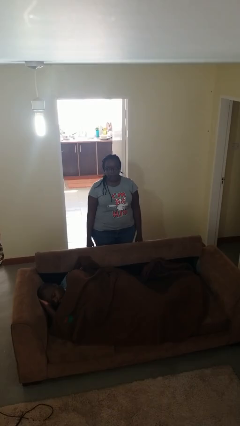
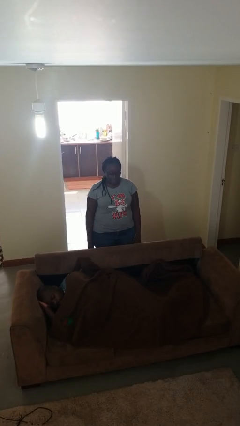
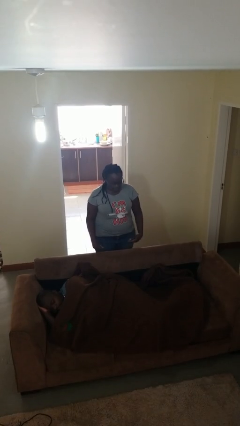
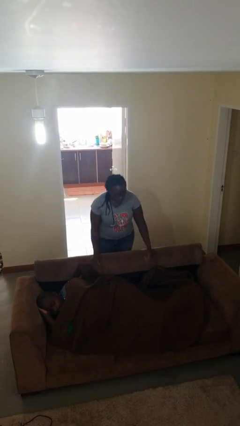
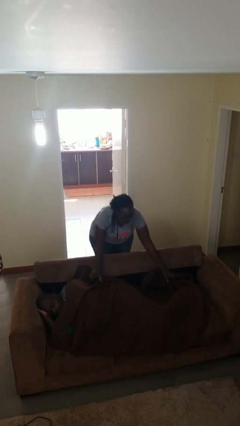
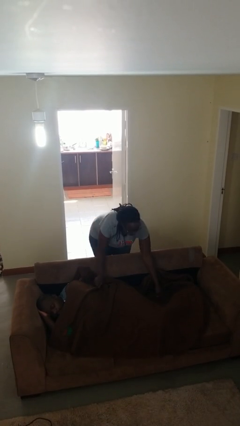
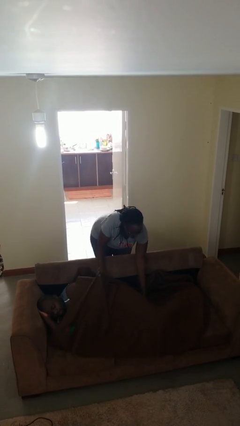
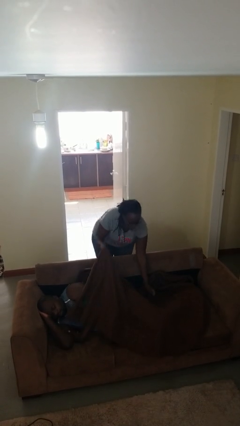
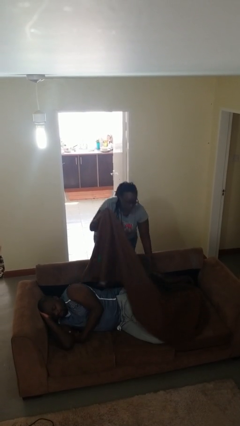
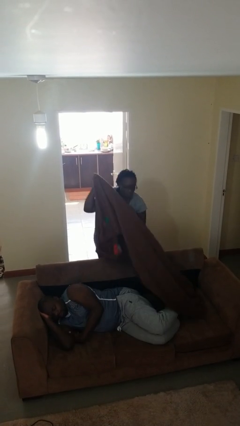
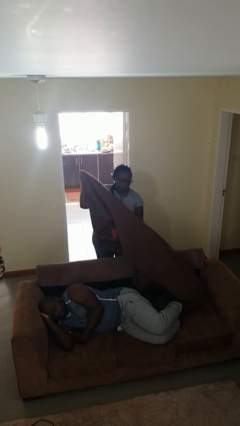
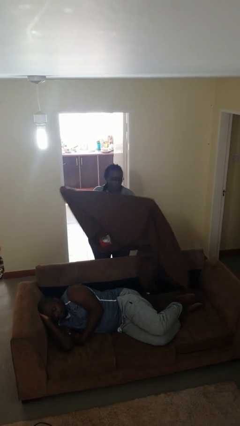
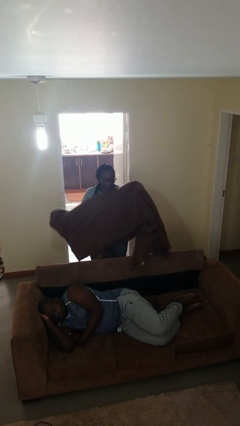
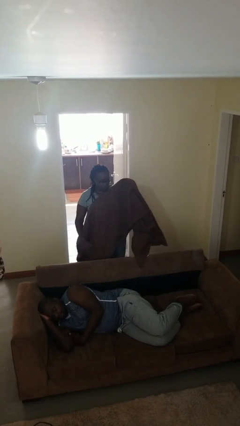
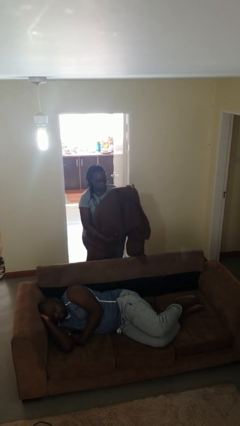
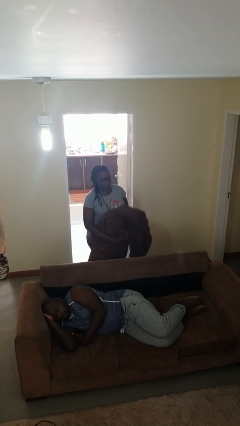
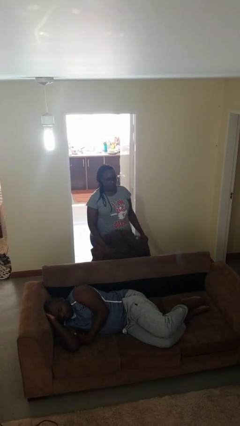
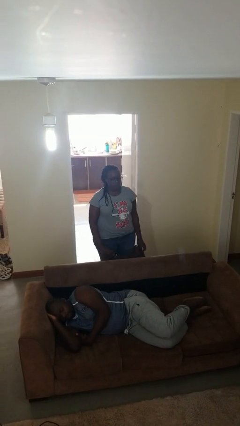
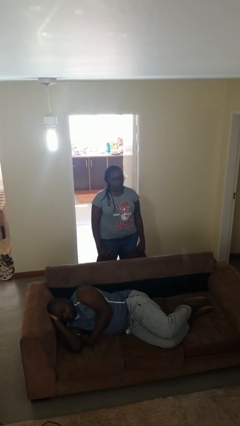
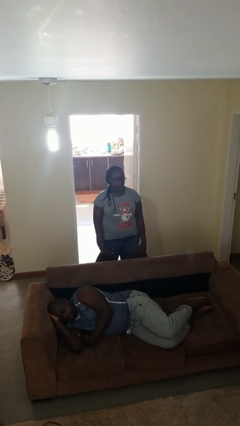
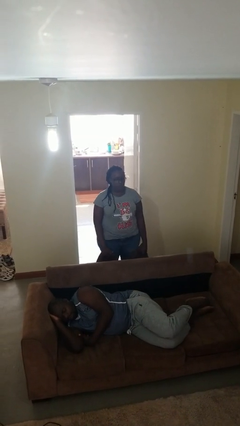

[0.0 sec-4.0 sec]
person uncovers friend with blanket

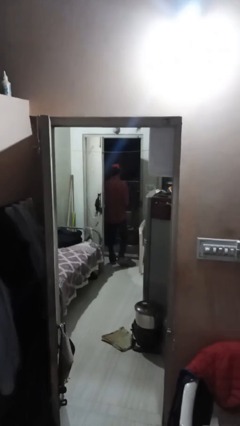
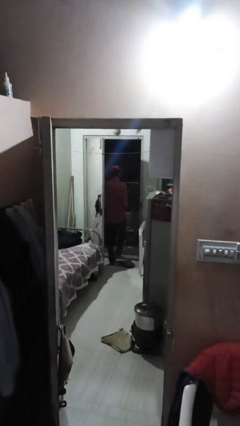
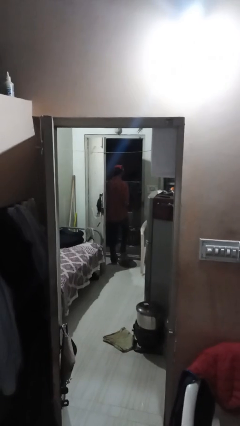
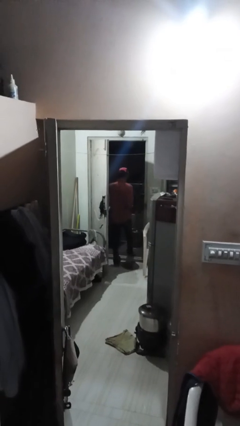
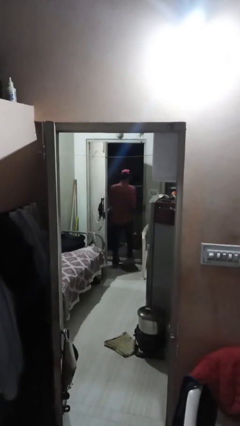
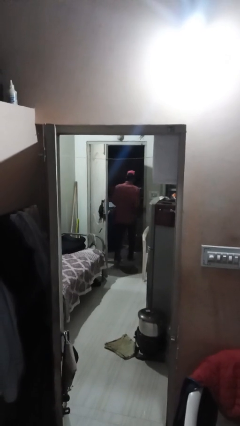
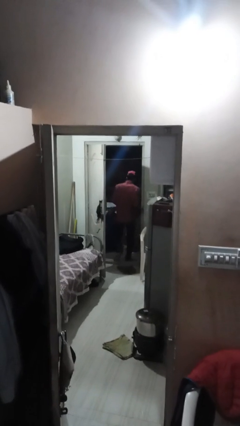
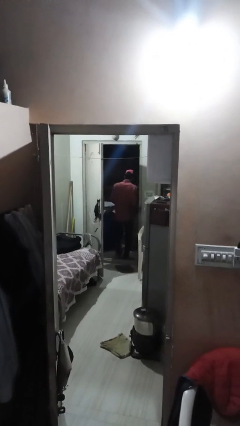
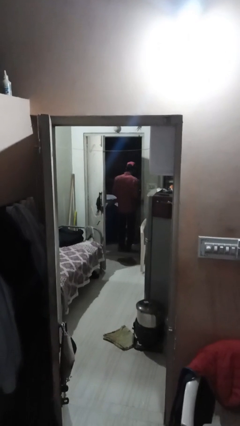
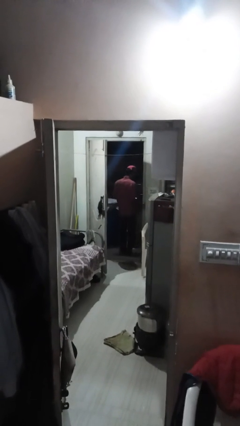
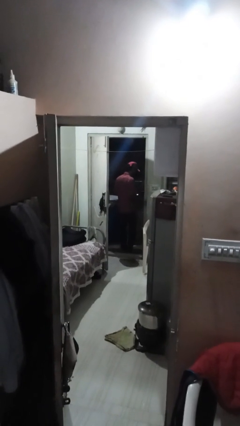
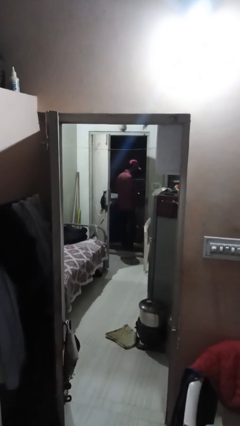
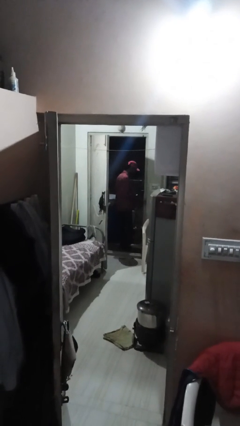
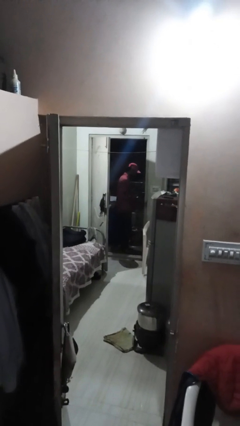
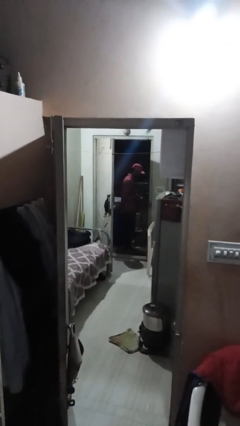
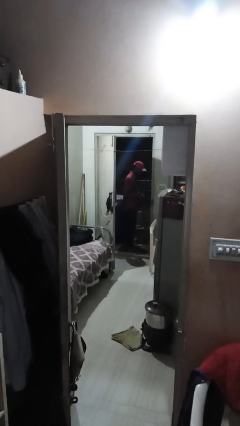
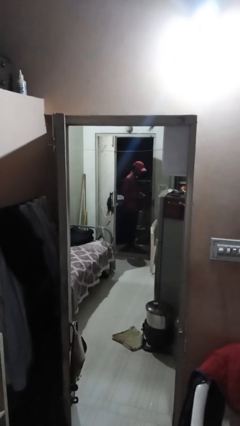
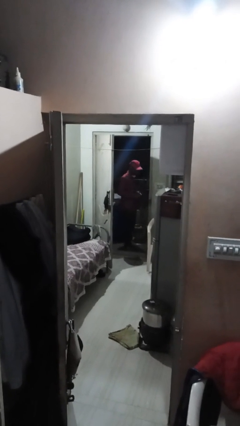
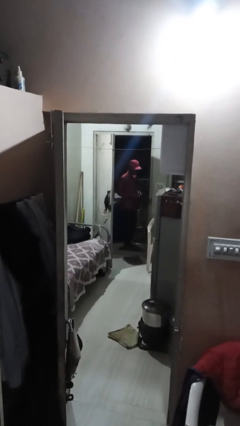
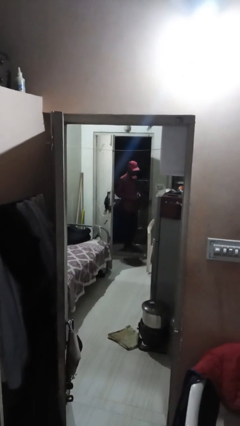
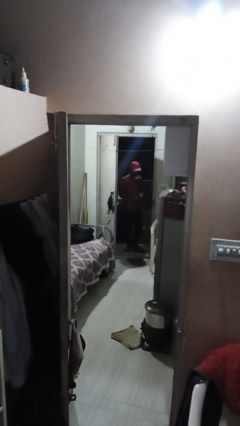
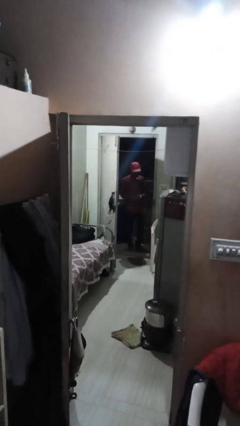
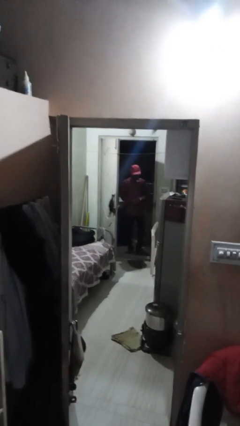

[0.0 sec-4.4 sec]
person exits scene through structure

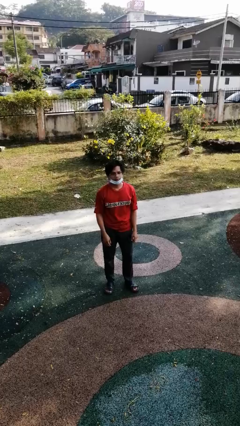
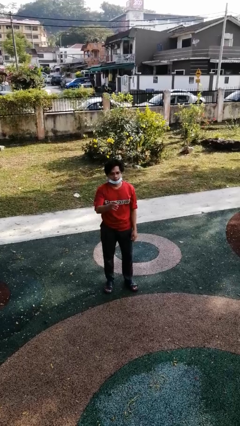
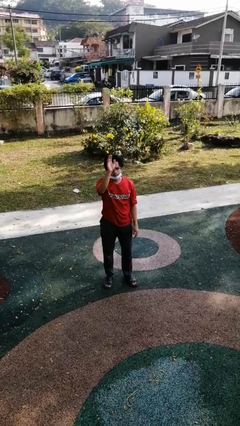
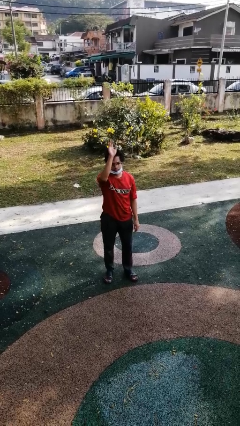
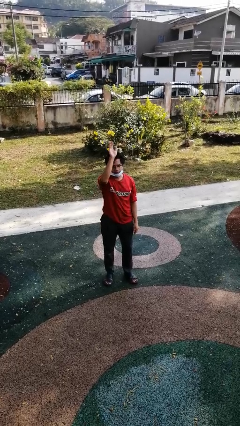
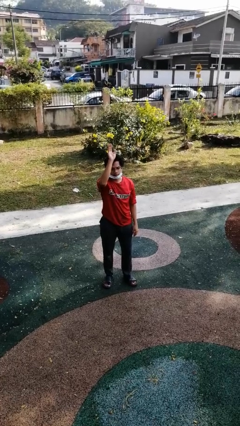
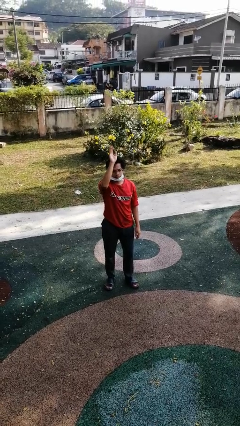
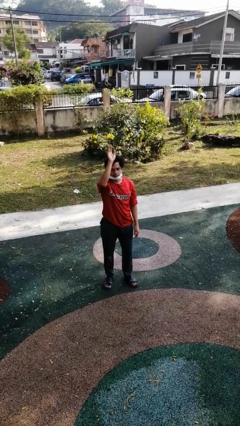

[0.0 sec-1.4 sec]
person gestures raise hand

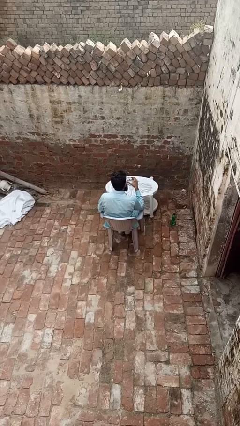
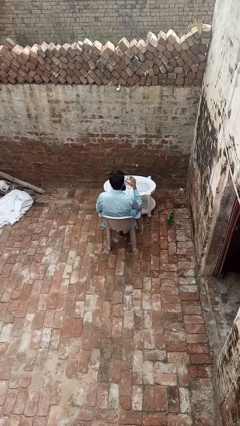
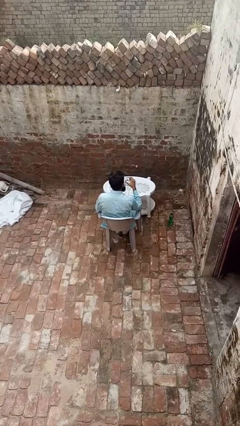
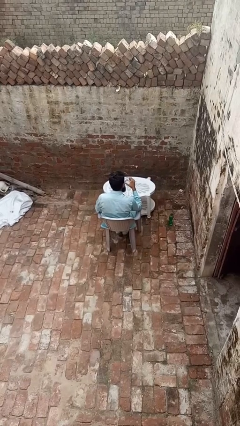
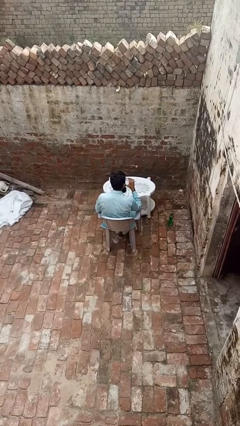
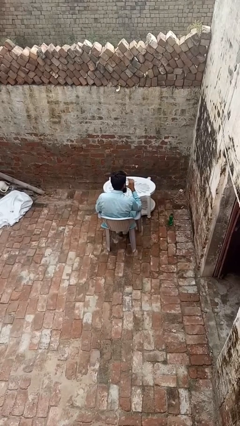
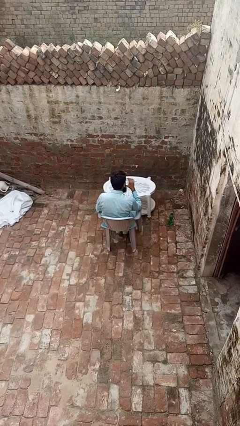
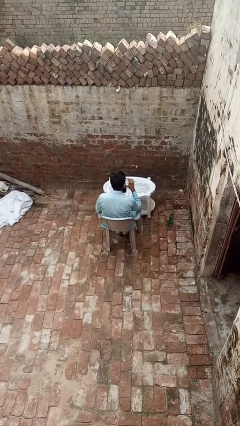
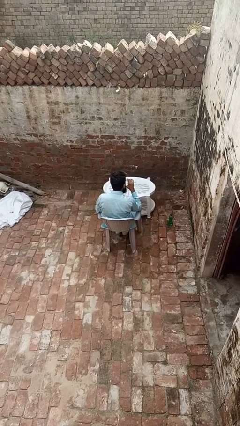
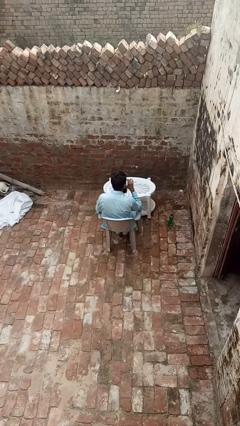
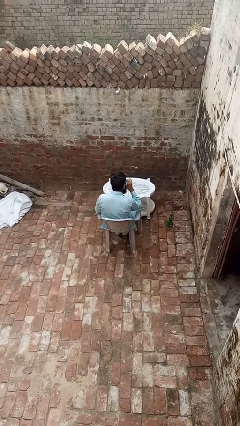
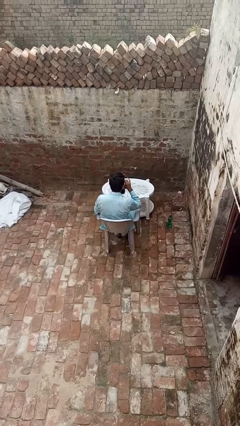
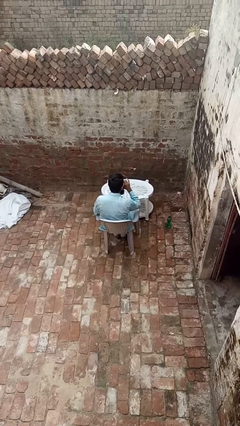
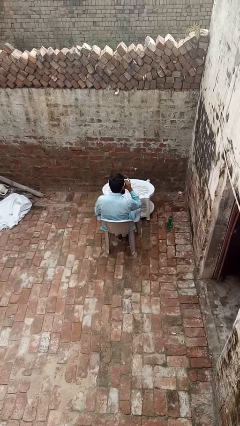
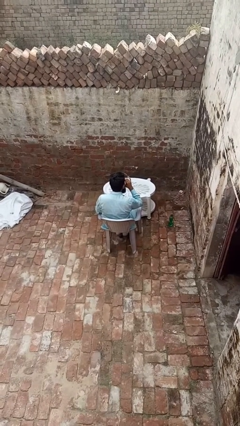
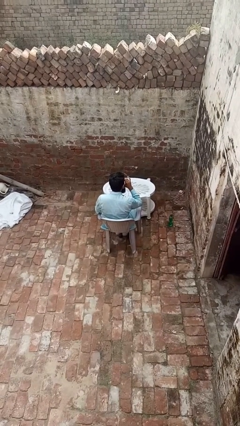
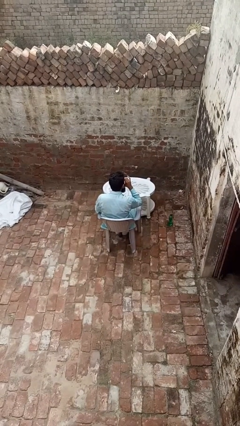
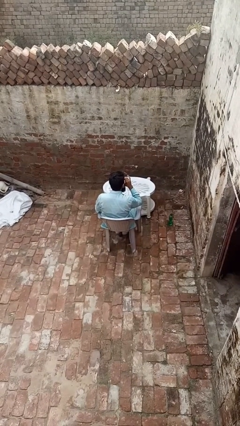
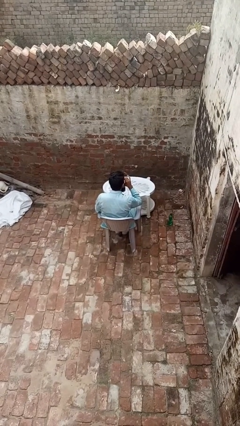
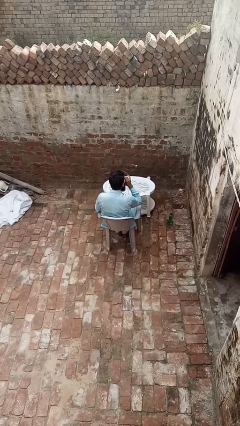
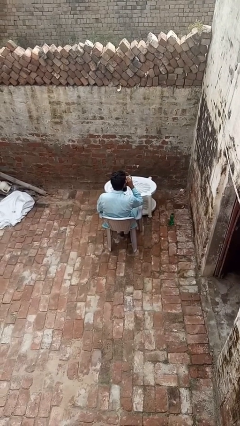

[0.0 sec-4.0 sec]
person drinks from shotglass

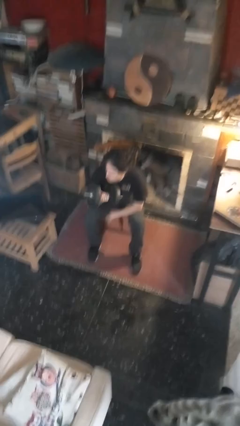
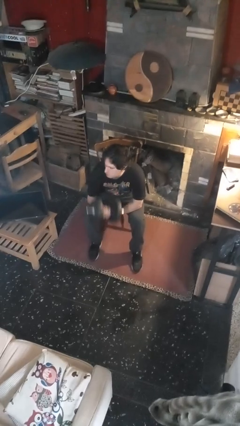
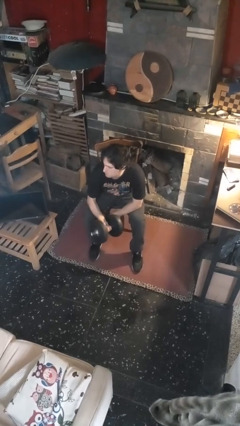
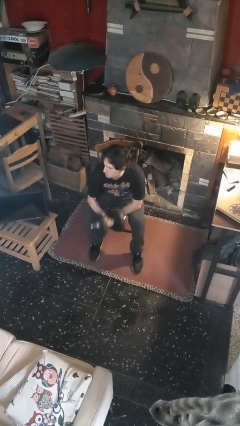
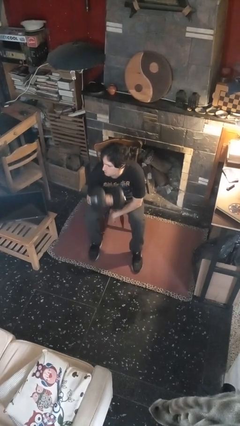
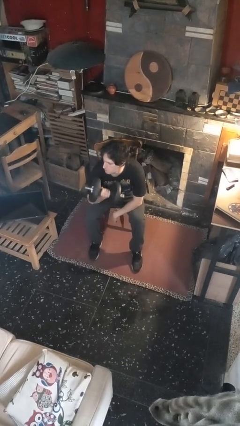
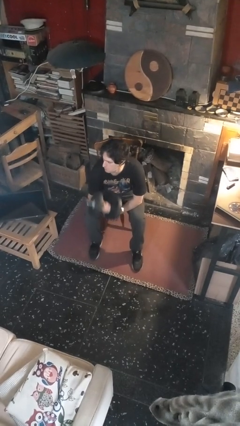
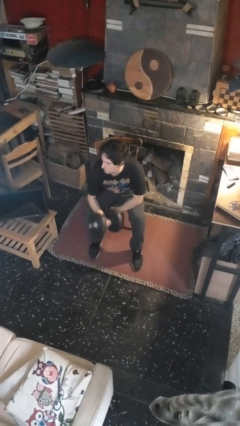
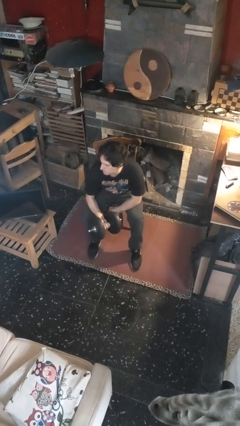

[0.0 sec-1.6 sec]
person lifts dumbbells

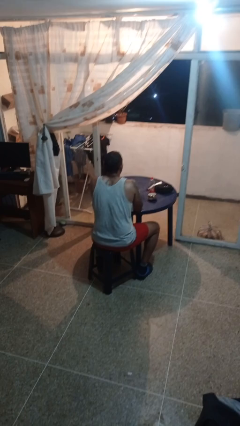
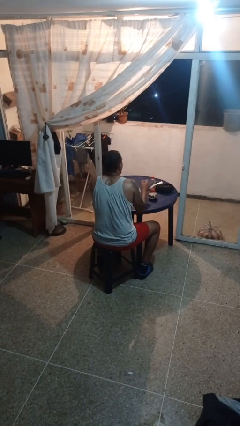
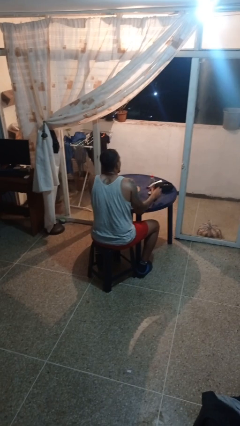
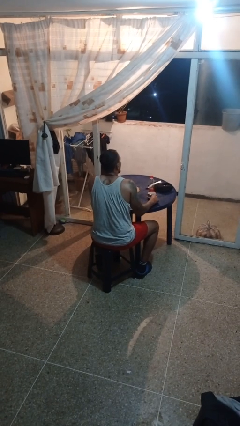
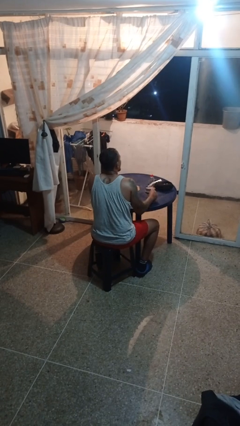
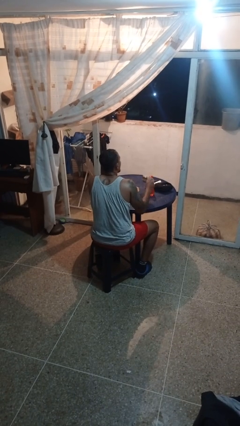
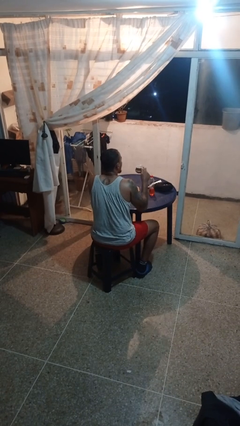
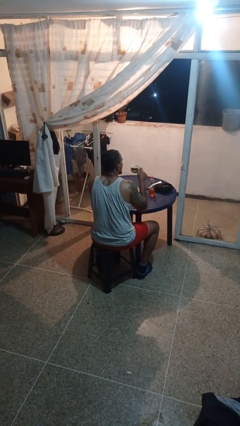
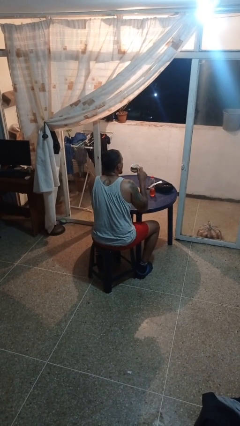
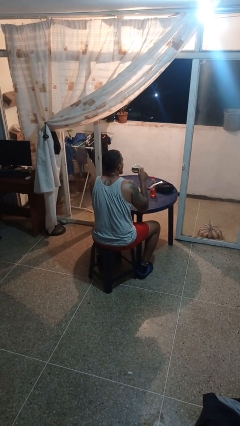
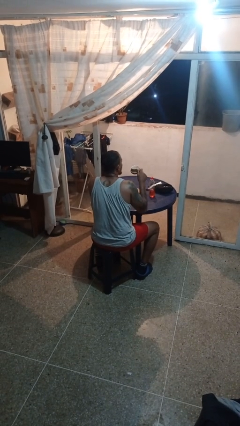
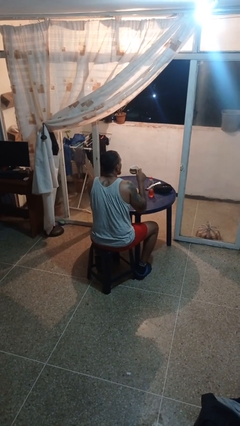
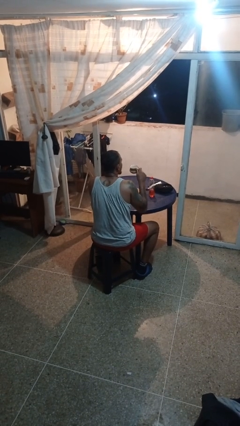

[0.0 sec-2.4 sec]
person picks up object from table
